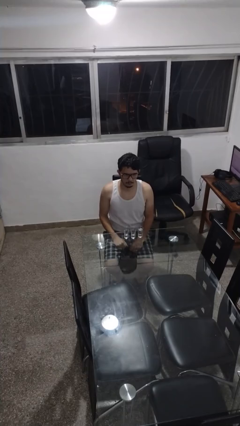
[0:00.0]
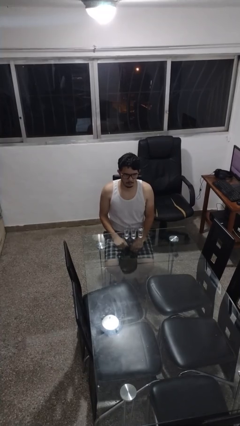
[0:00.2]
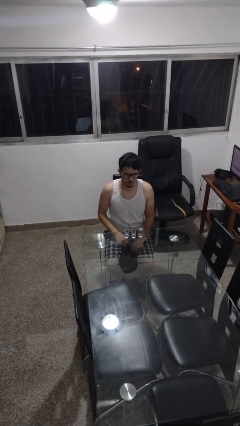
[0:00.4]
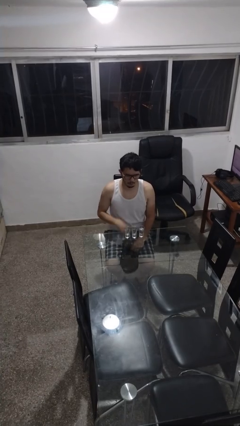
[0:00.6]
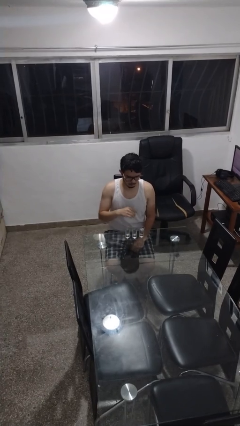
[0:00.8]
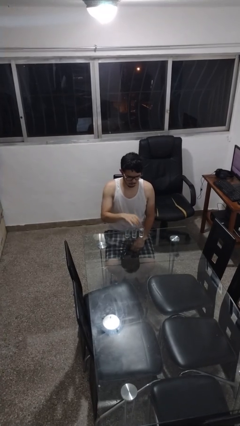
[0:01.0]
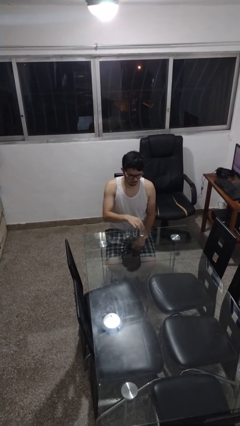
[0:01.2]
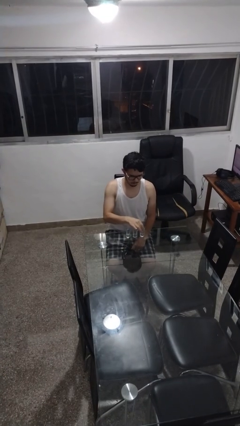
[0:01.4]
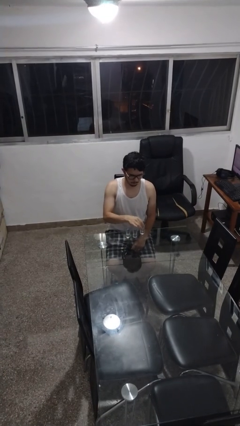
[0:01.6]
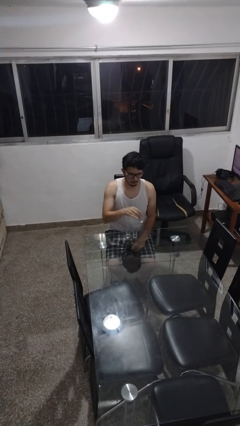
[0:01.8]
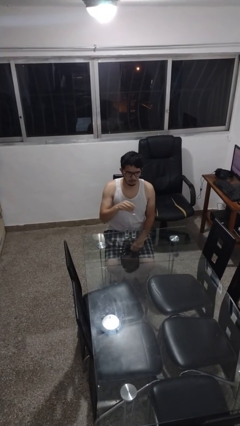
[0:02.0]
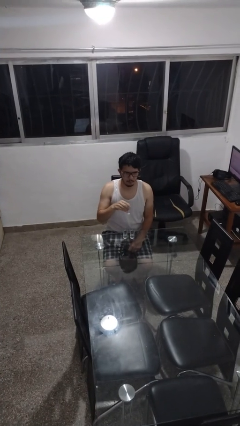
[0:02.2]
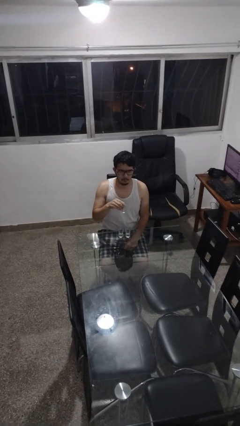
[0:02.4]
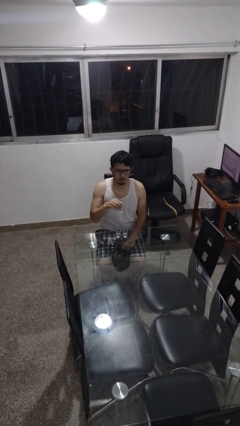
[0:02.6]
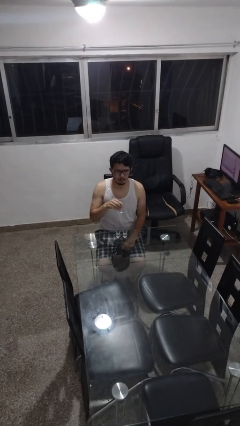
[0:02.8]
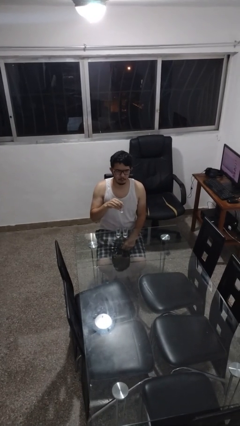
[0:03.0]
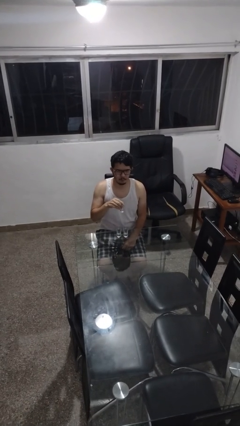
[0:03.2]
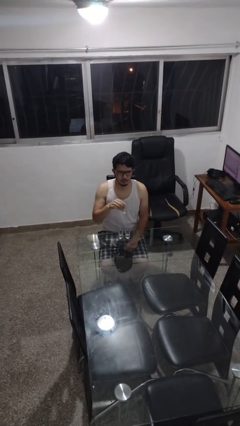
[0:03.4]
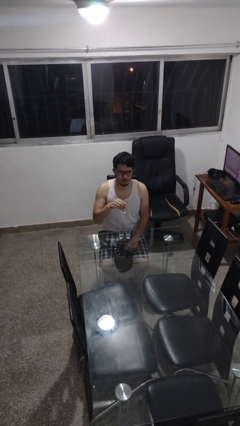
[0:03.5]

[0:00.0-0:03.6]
person picks up object from table

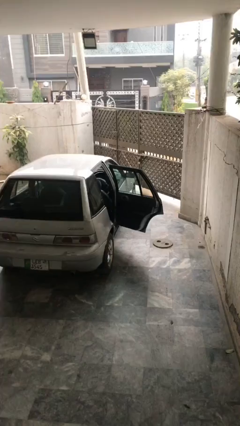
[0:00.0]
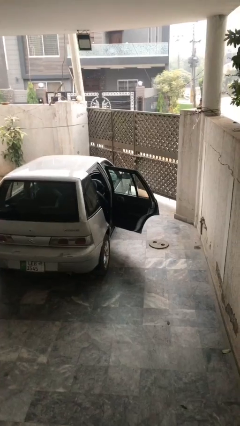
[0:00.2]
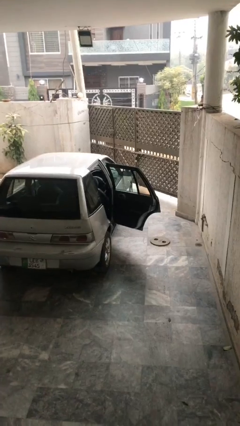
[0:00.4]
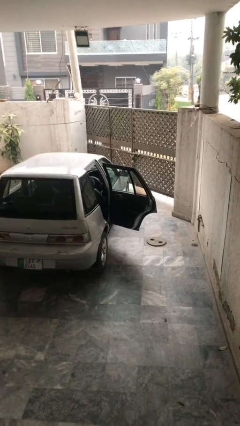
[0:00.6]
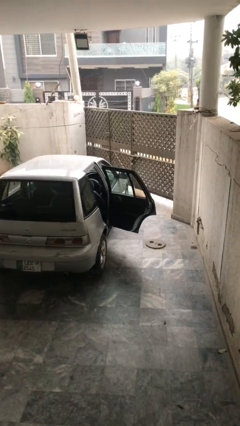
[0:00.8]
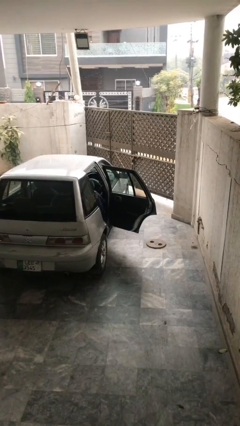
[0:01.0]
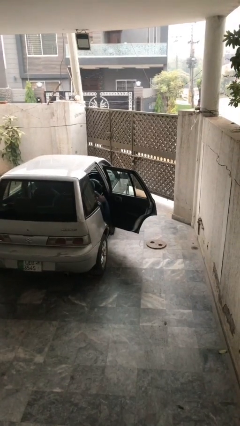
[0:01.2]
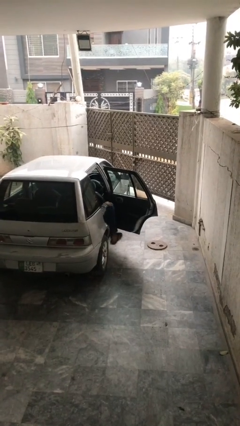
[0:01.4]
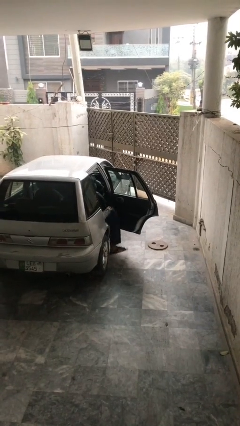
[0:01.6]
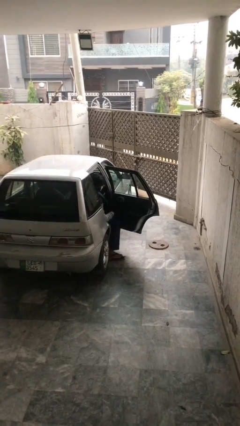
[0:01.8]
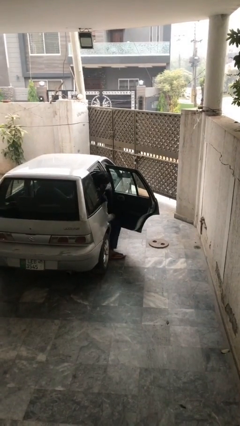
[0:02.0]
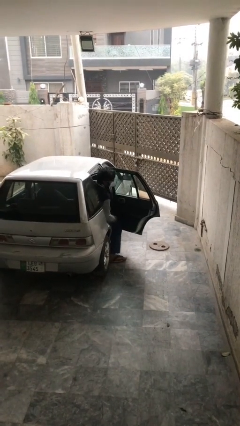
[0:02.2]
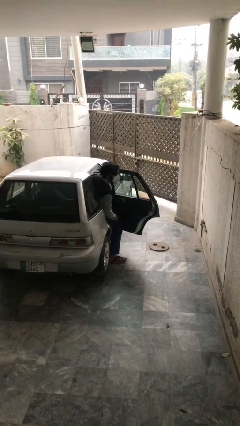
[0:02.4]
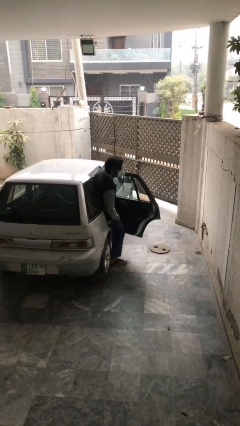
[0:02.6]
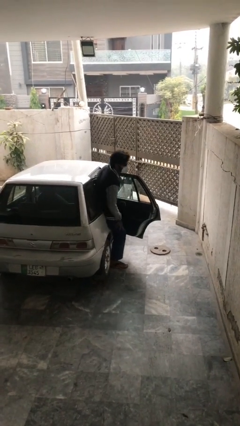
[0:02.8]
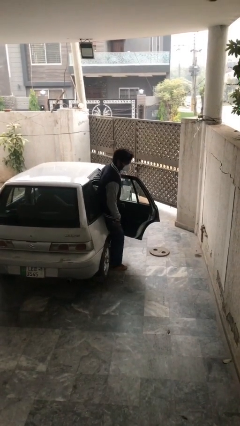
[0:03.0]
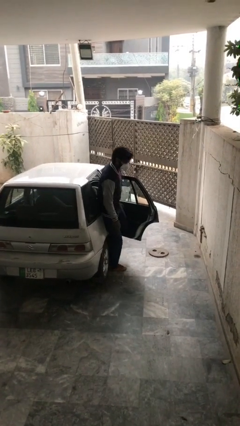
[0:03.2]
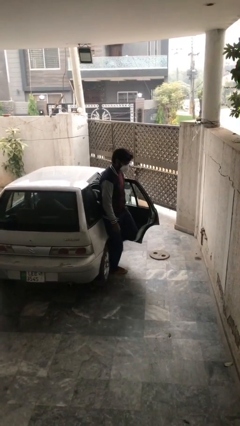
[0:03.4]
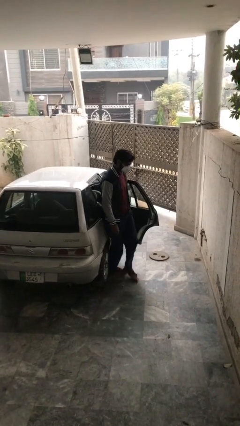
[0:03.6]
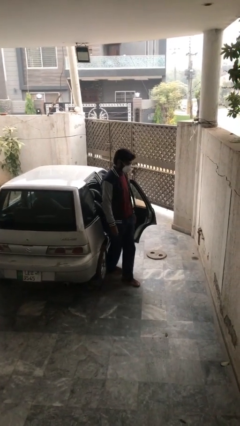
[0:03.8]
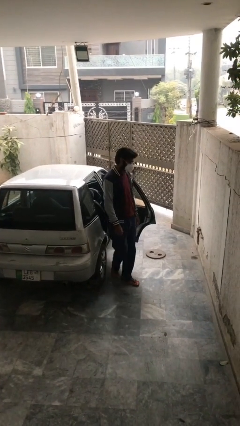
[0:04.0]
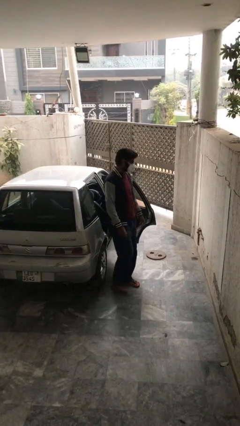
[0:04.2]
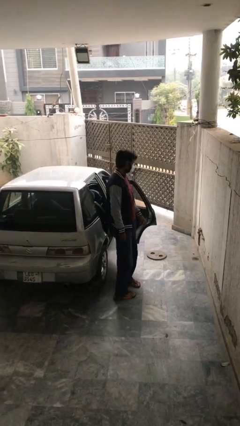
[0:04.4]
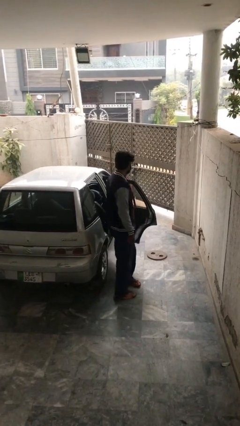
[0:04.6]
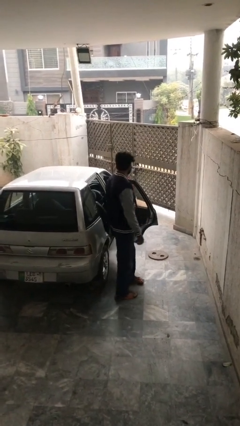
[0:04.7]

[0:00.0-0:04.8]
person exits car

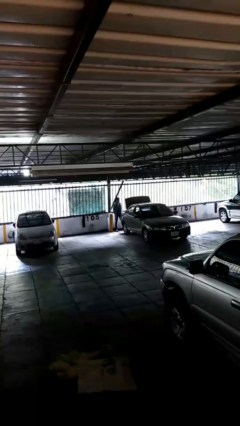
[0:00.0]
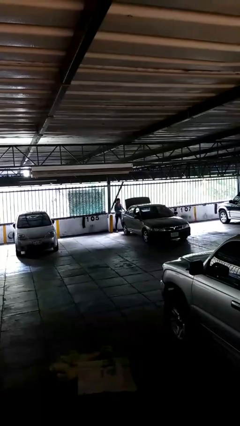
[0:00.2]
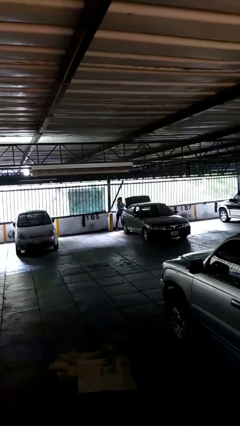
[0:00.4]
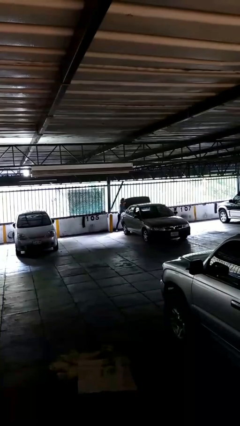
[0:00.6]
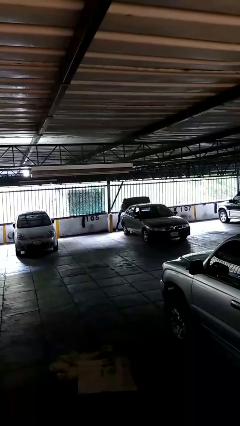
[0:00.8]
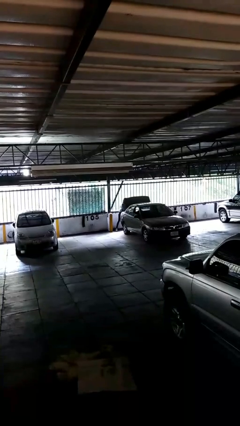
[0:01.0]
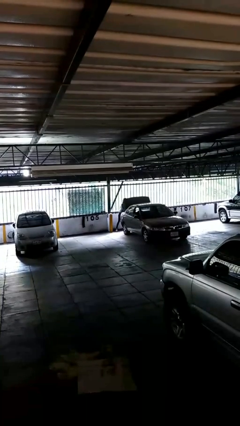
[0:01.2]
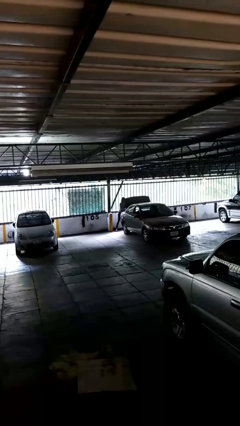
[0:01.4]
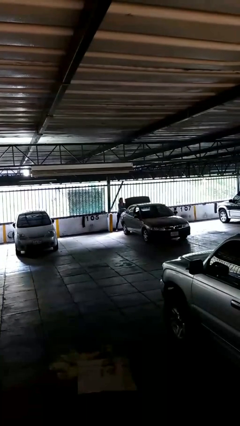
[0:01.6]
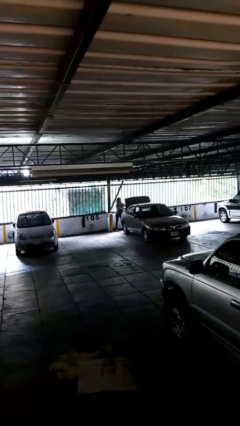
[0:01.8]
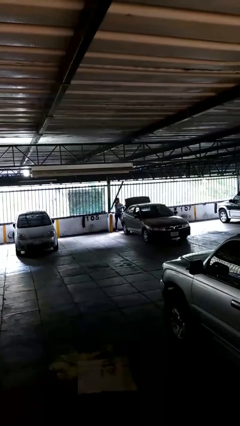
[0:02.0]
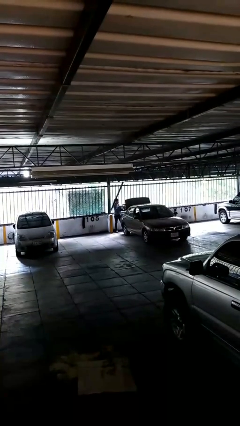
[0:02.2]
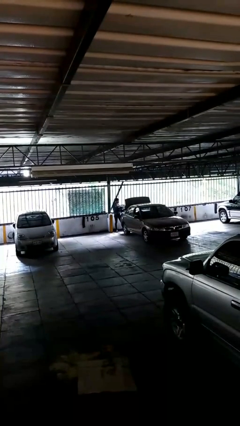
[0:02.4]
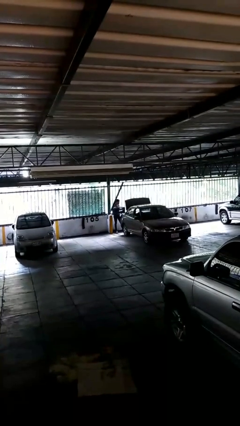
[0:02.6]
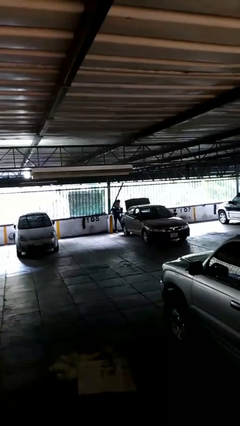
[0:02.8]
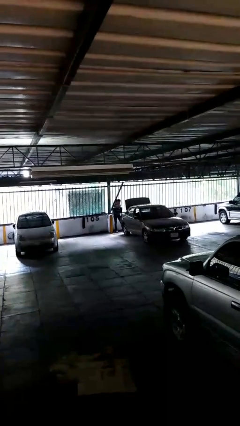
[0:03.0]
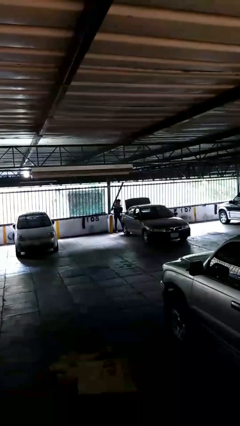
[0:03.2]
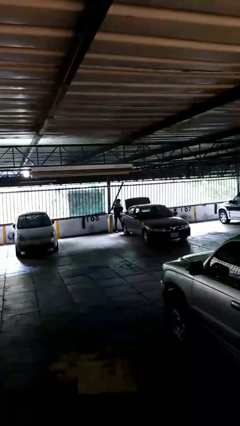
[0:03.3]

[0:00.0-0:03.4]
person unloads car

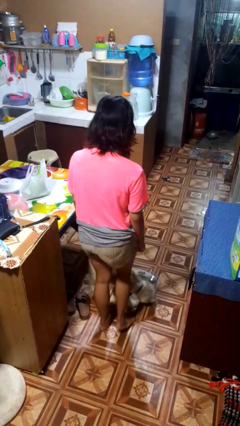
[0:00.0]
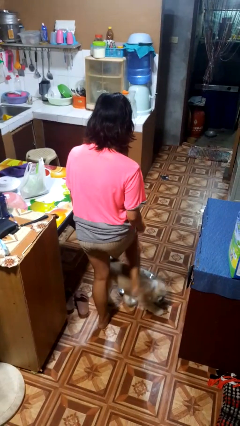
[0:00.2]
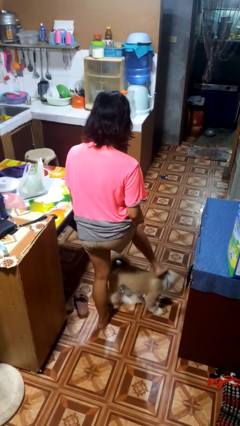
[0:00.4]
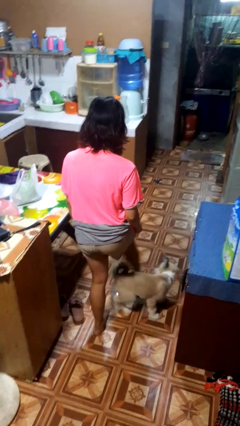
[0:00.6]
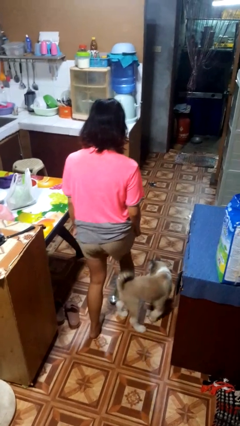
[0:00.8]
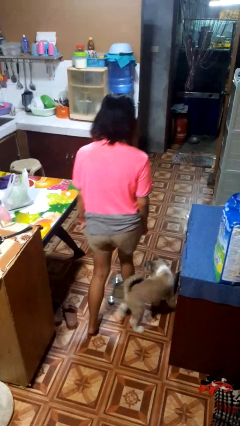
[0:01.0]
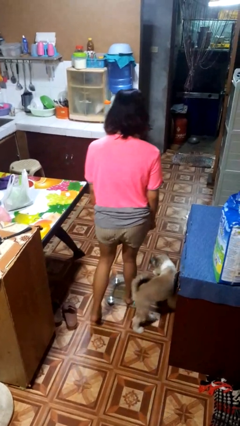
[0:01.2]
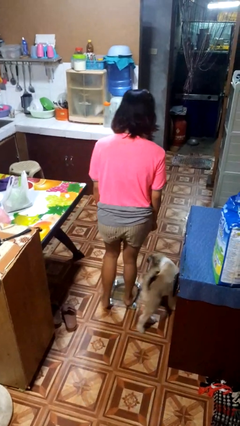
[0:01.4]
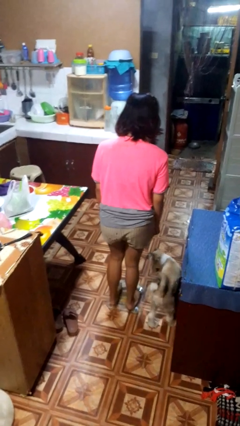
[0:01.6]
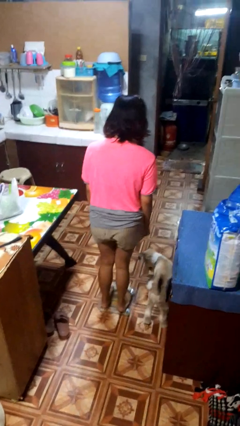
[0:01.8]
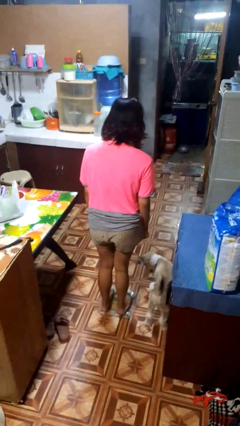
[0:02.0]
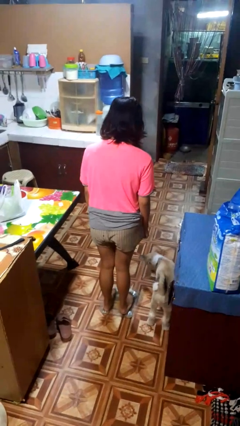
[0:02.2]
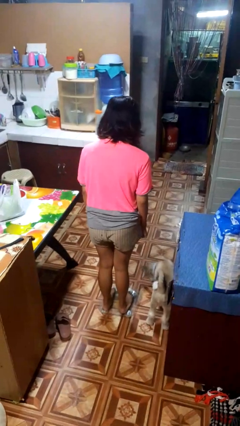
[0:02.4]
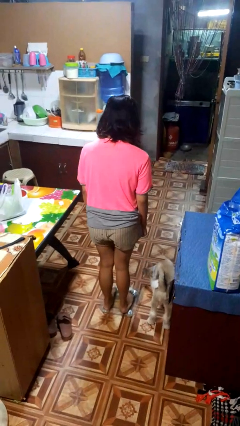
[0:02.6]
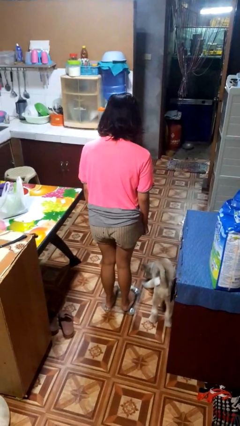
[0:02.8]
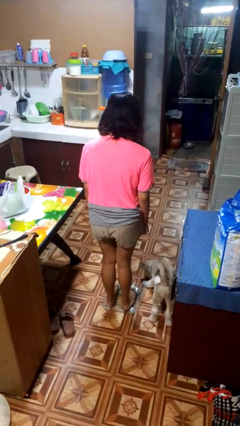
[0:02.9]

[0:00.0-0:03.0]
person uses bodyweight scale

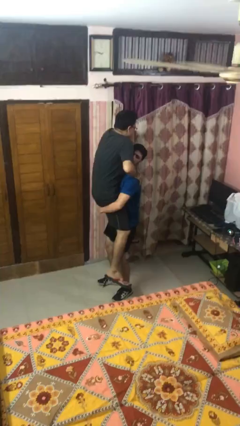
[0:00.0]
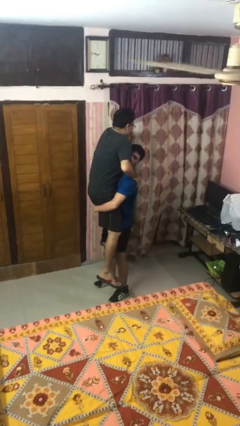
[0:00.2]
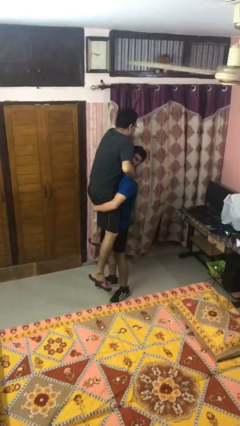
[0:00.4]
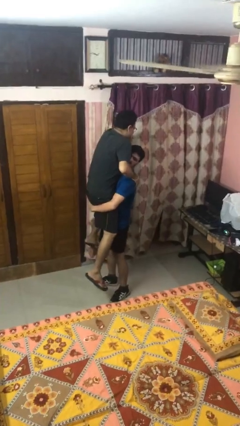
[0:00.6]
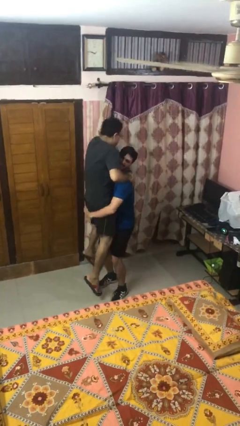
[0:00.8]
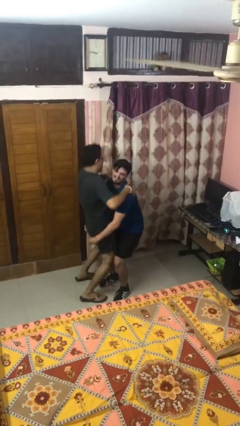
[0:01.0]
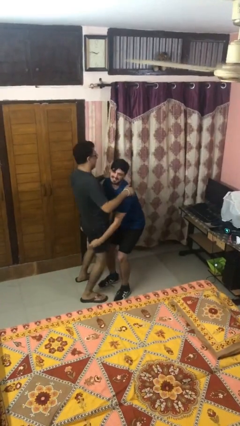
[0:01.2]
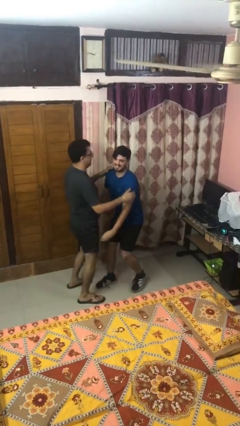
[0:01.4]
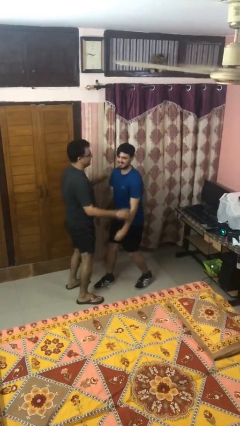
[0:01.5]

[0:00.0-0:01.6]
person puts down person

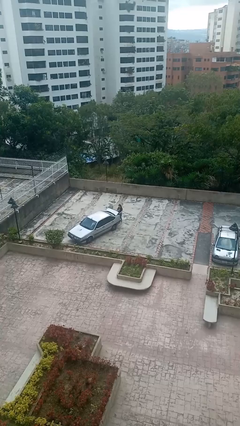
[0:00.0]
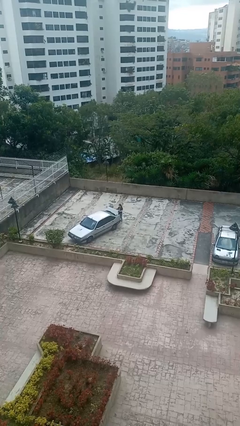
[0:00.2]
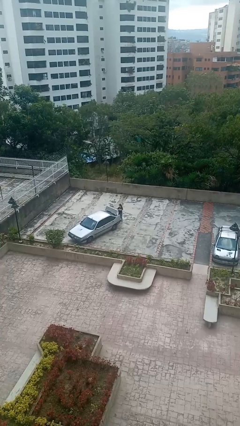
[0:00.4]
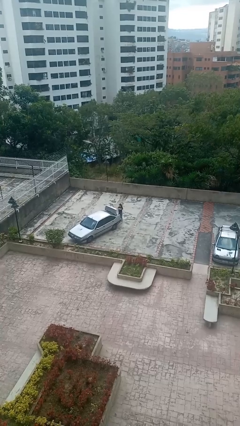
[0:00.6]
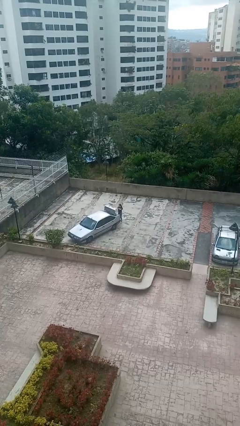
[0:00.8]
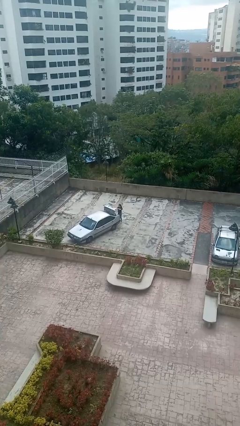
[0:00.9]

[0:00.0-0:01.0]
person opens car trunk
